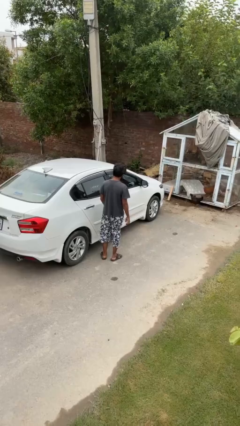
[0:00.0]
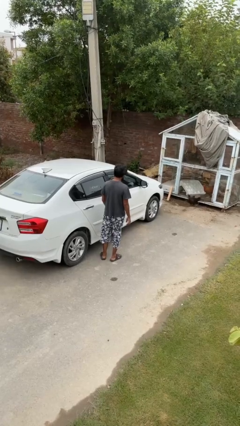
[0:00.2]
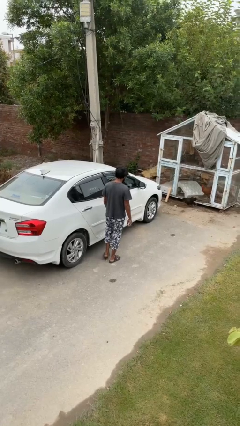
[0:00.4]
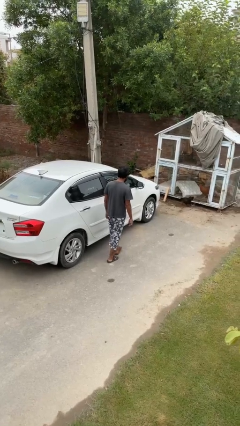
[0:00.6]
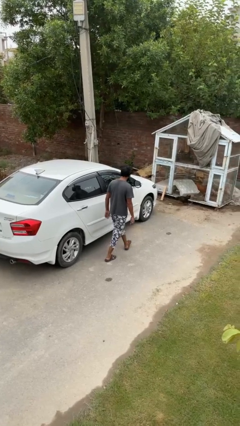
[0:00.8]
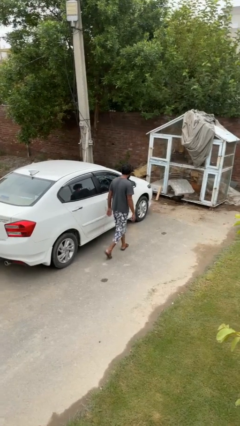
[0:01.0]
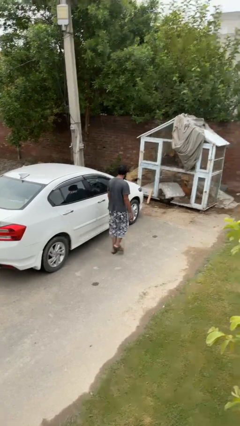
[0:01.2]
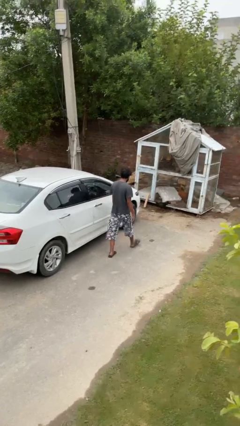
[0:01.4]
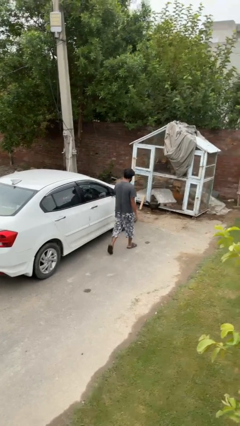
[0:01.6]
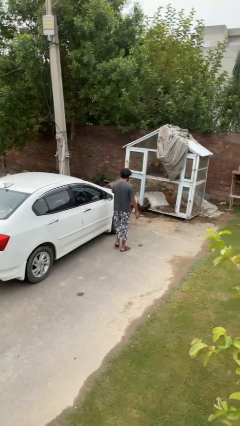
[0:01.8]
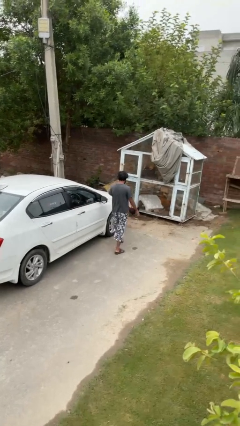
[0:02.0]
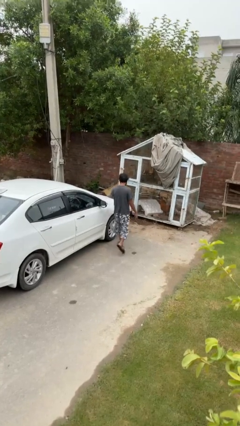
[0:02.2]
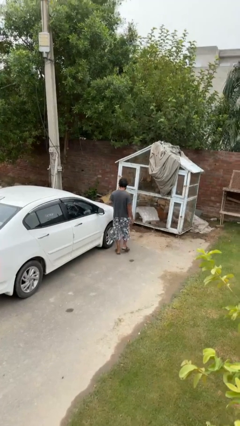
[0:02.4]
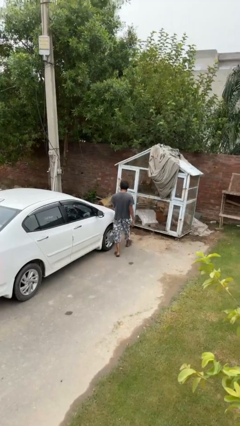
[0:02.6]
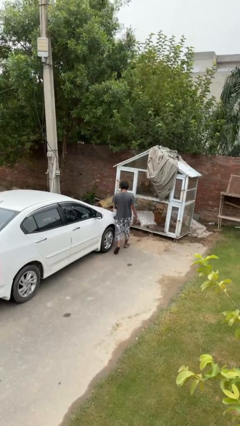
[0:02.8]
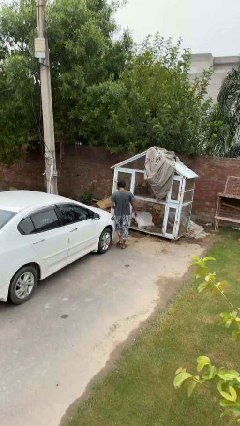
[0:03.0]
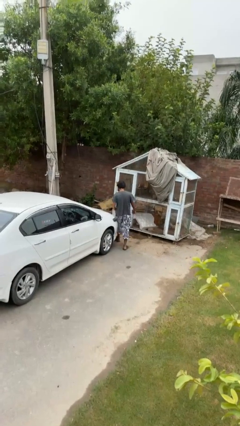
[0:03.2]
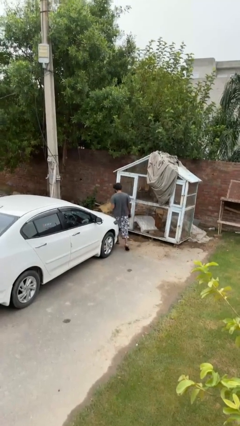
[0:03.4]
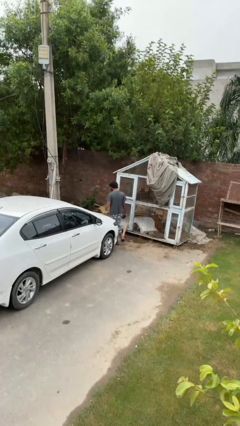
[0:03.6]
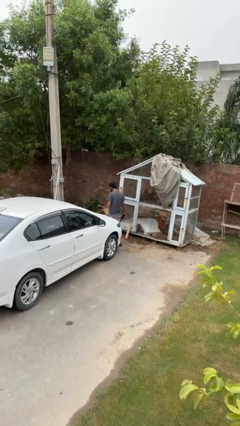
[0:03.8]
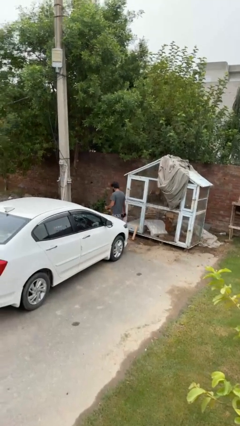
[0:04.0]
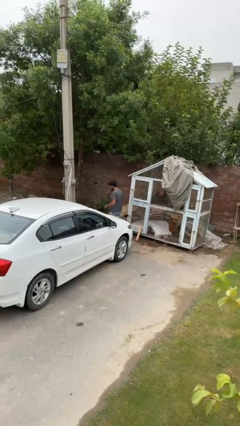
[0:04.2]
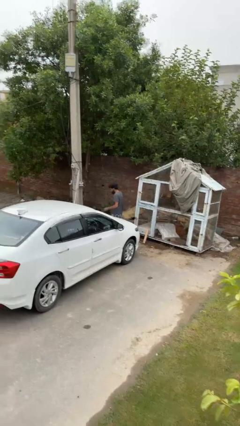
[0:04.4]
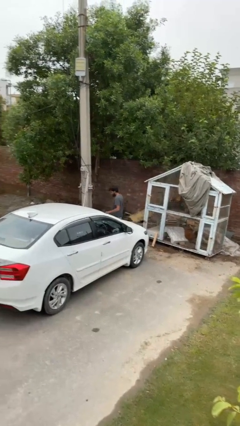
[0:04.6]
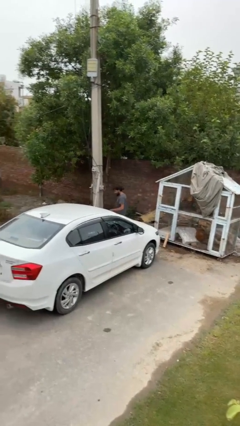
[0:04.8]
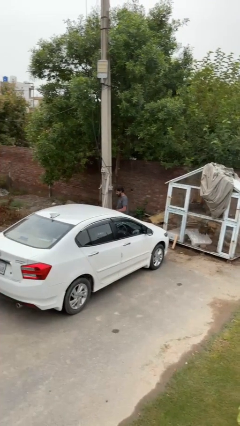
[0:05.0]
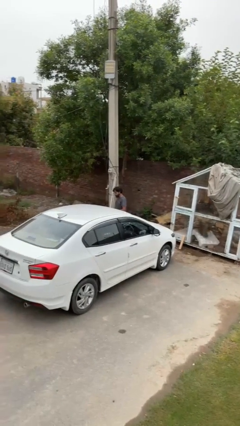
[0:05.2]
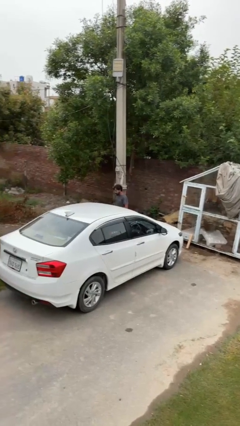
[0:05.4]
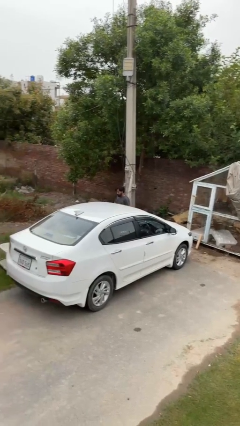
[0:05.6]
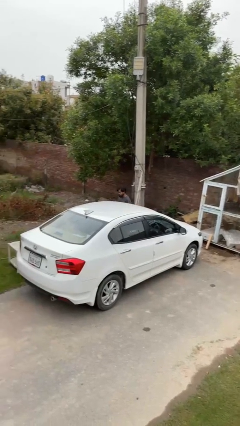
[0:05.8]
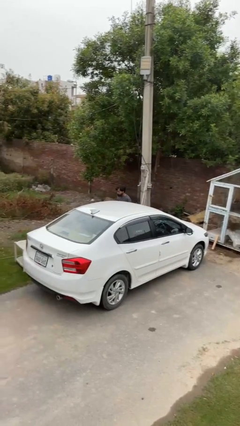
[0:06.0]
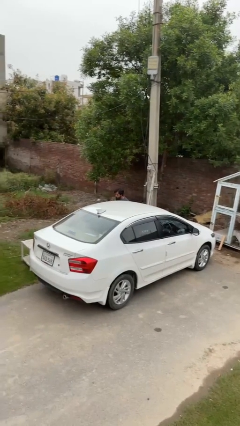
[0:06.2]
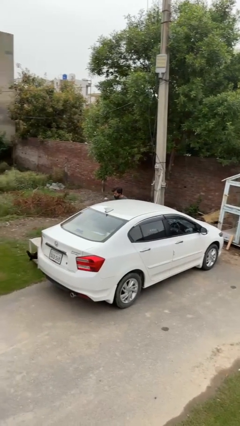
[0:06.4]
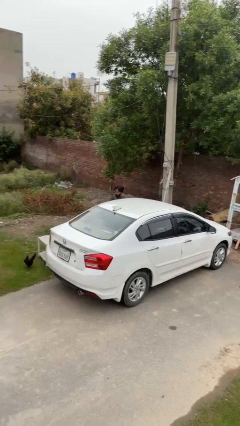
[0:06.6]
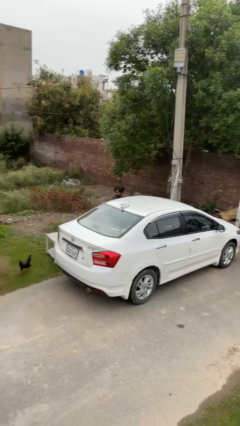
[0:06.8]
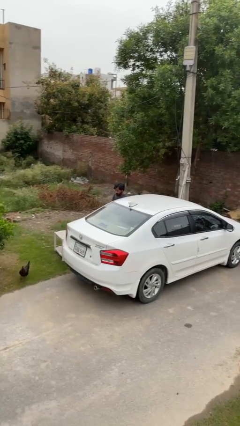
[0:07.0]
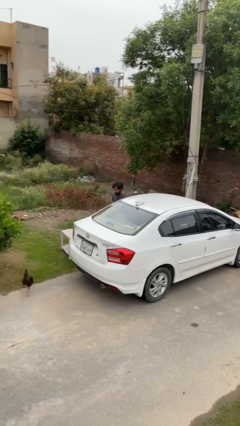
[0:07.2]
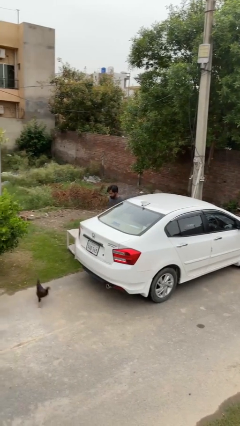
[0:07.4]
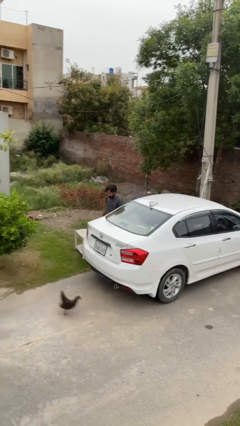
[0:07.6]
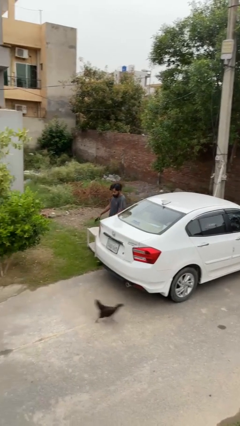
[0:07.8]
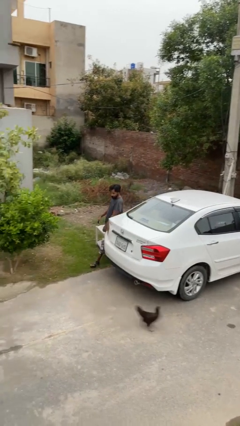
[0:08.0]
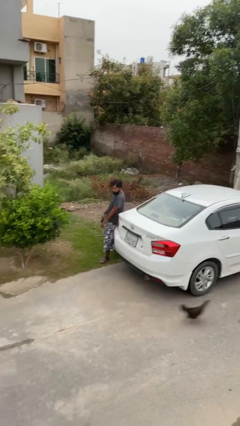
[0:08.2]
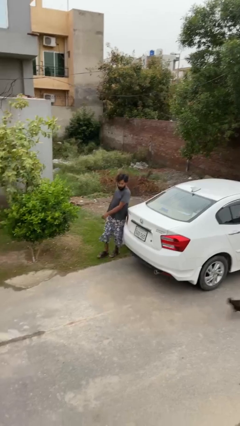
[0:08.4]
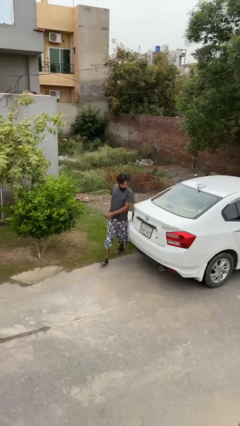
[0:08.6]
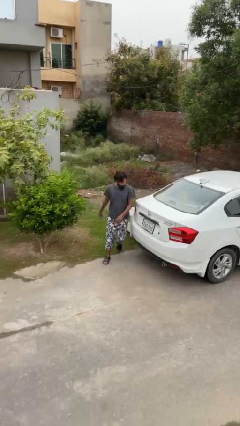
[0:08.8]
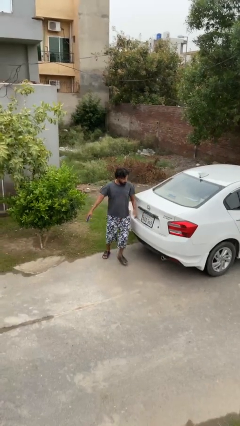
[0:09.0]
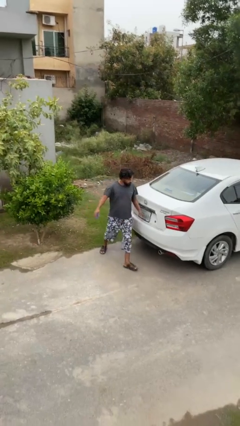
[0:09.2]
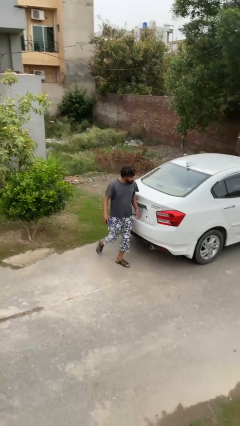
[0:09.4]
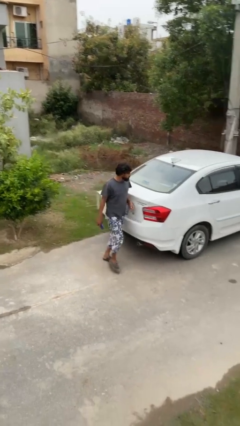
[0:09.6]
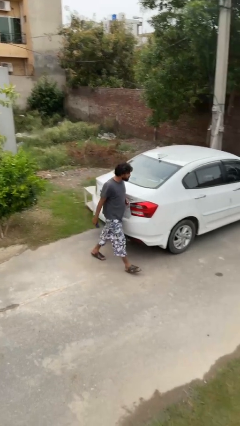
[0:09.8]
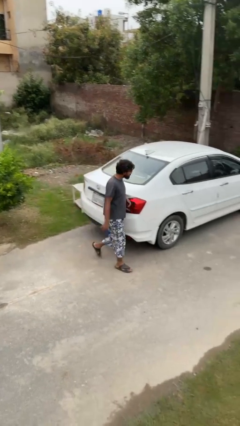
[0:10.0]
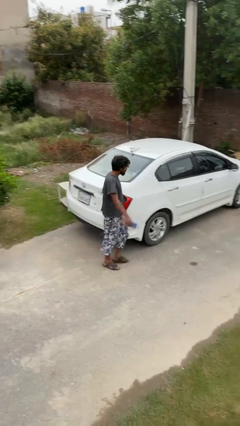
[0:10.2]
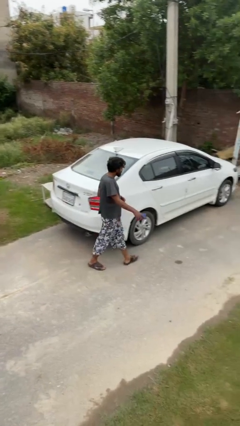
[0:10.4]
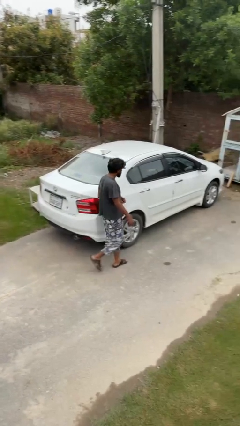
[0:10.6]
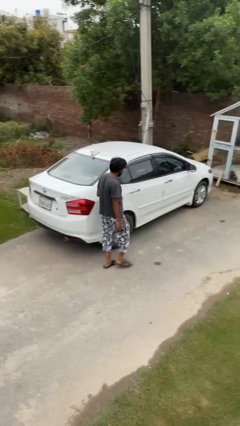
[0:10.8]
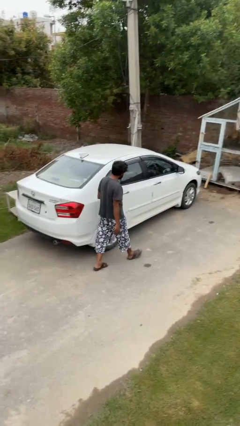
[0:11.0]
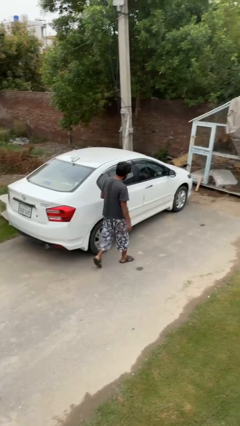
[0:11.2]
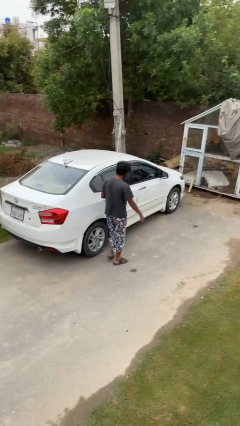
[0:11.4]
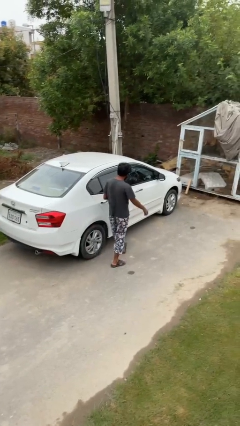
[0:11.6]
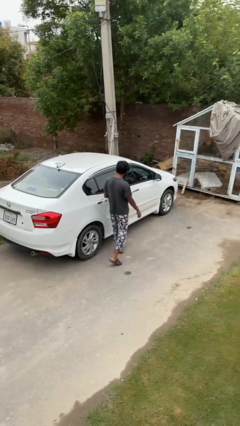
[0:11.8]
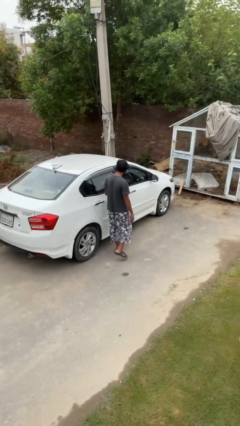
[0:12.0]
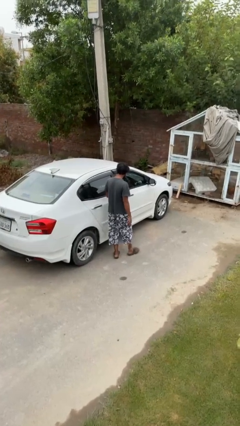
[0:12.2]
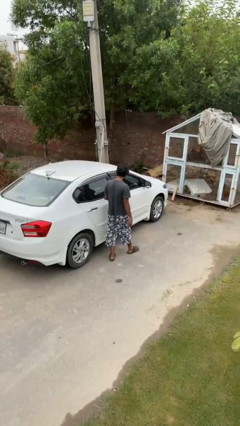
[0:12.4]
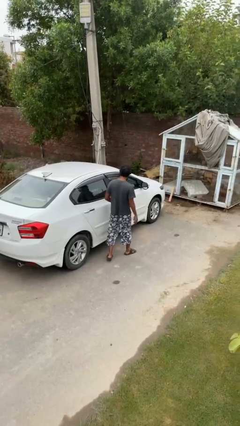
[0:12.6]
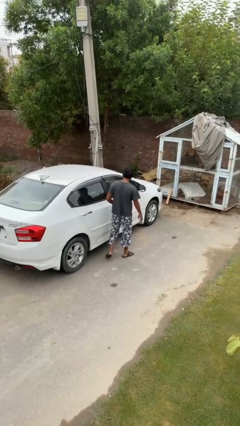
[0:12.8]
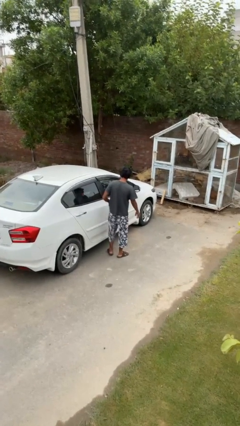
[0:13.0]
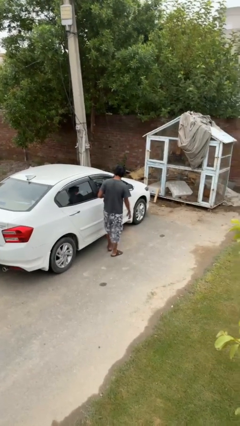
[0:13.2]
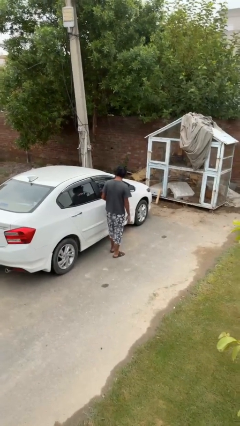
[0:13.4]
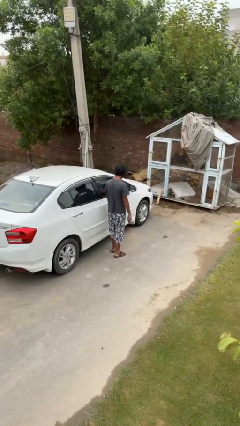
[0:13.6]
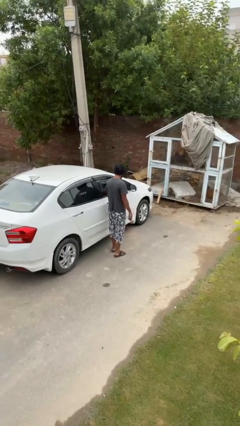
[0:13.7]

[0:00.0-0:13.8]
person walks around car

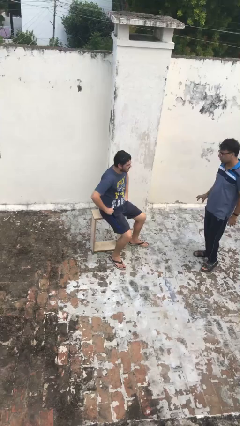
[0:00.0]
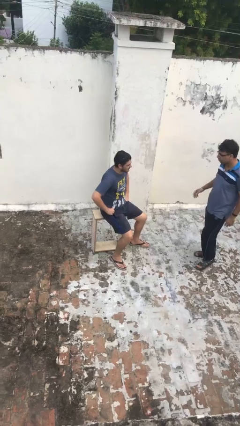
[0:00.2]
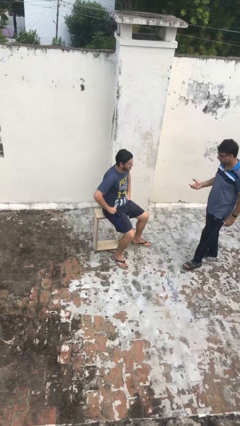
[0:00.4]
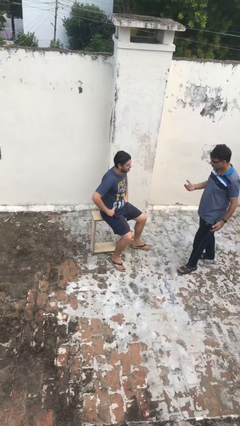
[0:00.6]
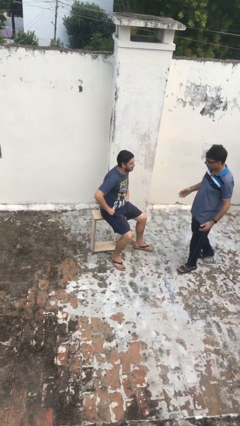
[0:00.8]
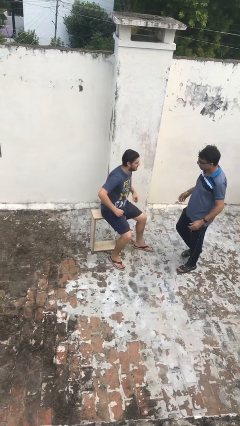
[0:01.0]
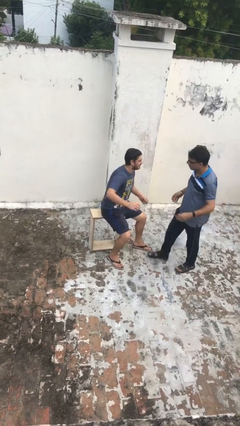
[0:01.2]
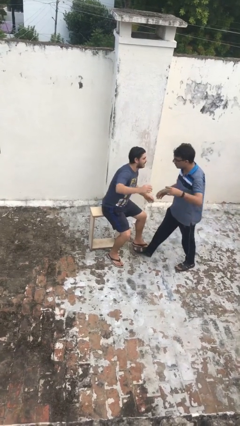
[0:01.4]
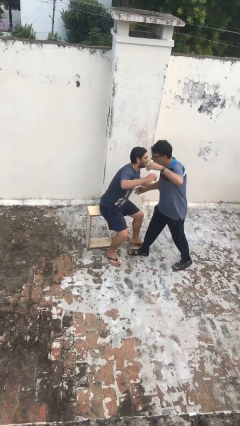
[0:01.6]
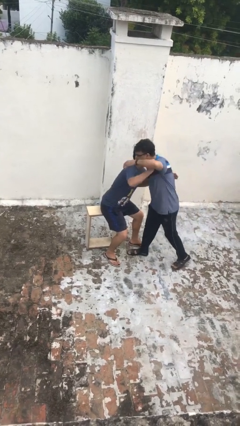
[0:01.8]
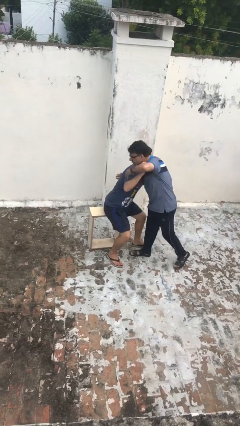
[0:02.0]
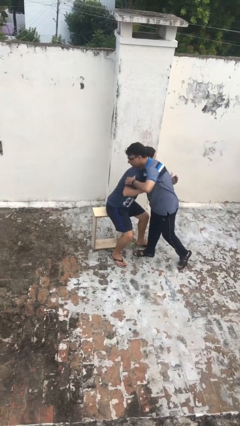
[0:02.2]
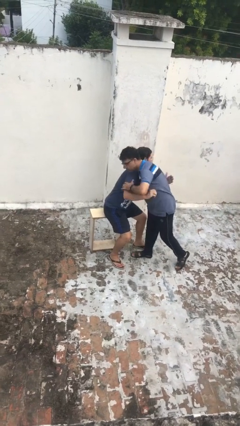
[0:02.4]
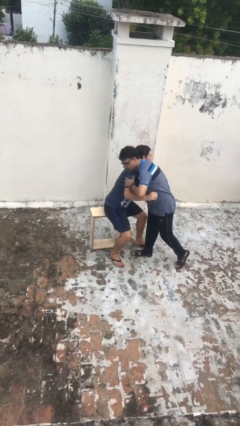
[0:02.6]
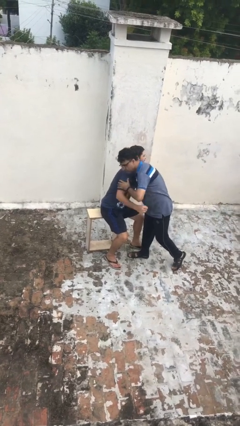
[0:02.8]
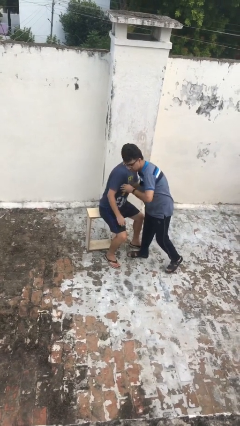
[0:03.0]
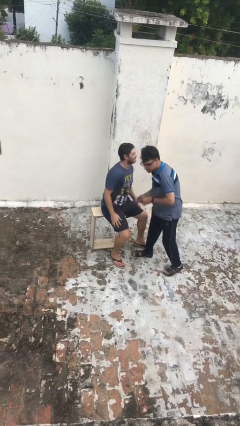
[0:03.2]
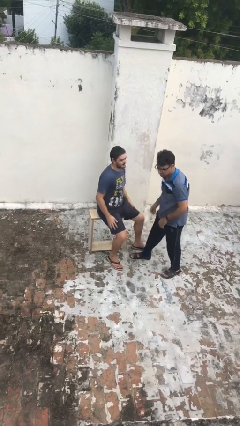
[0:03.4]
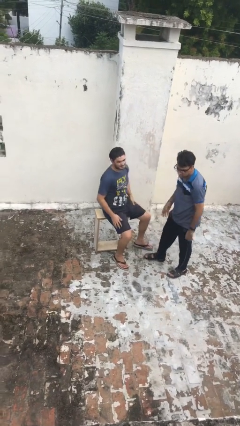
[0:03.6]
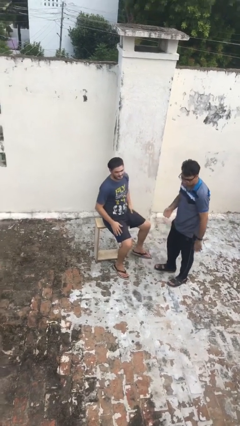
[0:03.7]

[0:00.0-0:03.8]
person embraces person

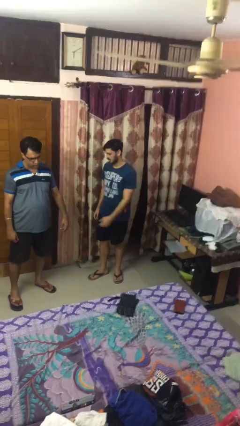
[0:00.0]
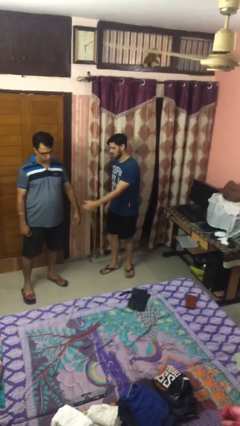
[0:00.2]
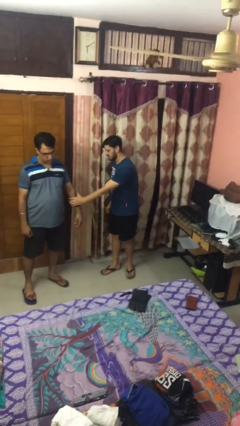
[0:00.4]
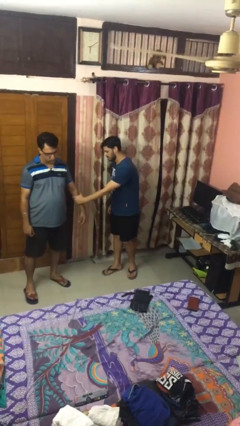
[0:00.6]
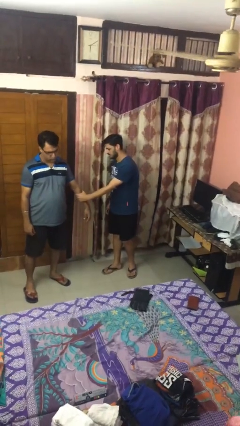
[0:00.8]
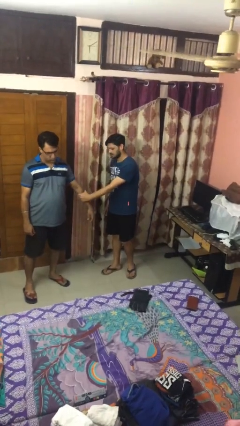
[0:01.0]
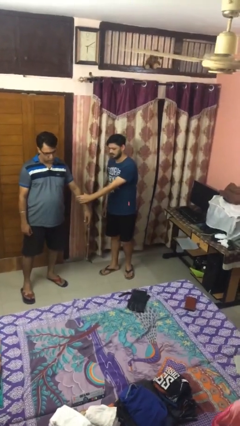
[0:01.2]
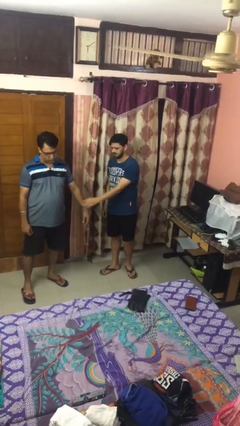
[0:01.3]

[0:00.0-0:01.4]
person grabs person by forearm
